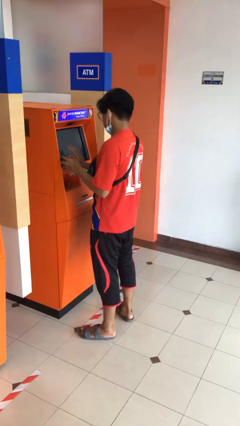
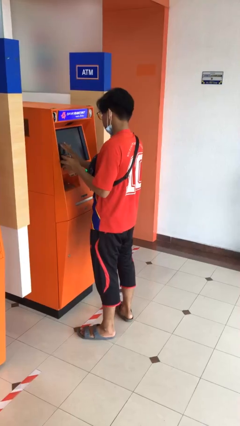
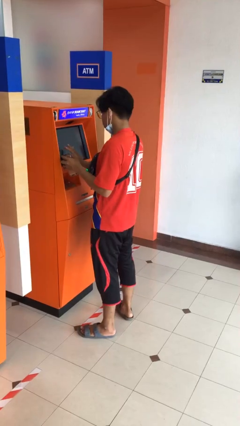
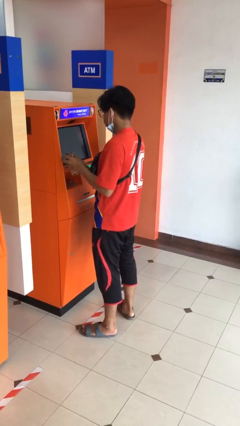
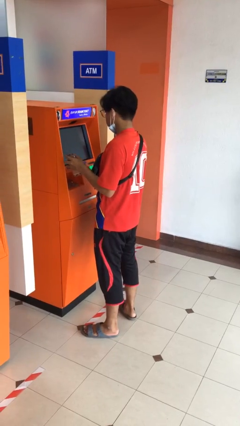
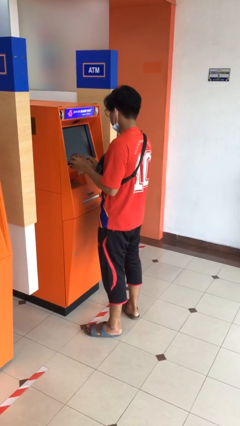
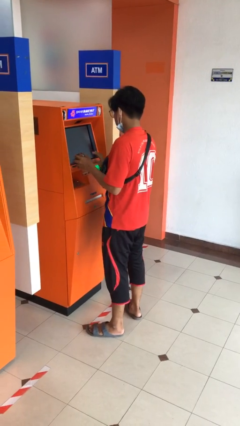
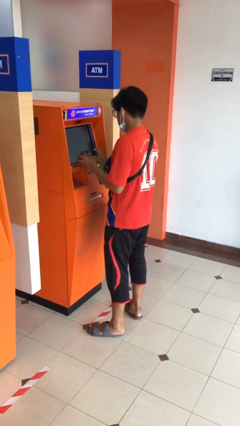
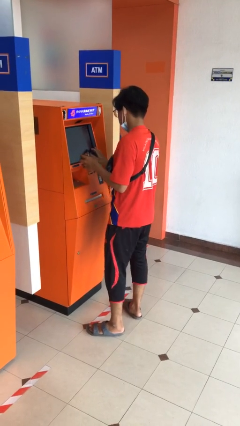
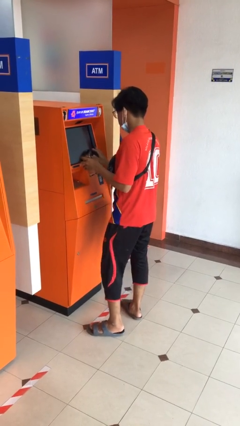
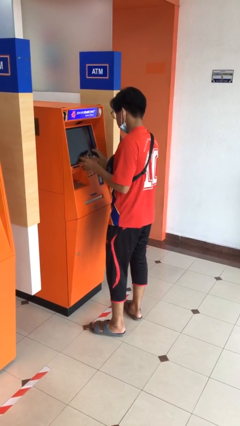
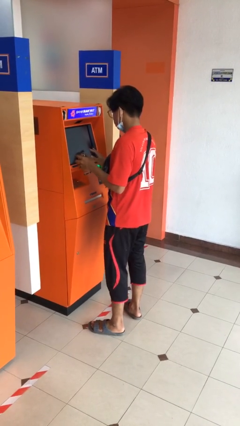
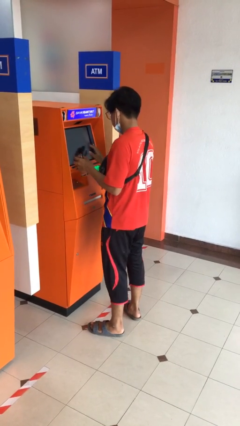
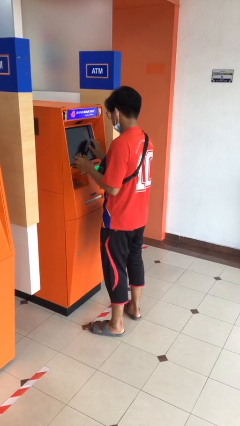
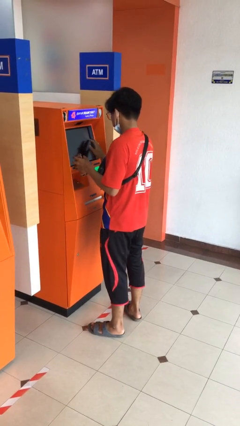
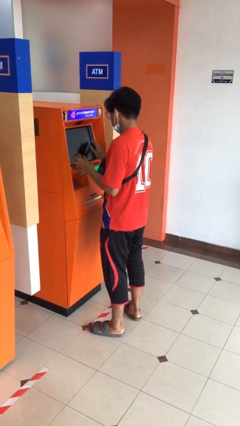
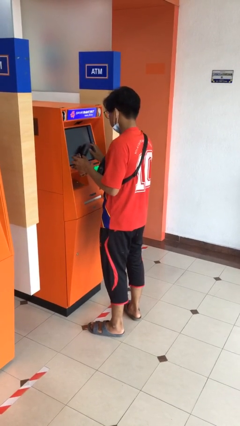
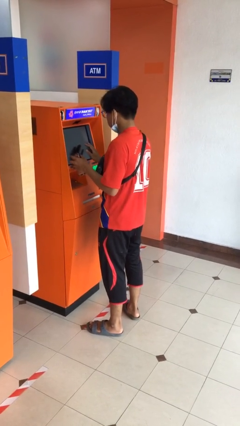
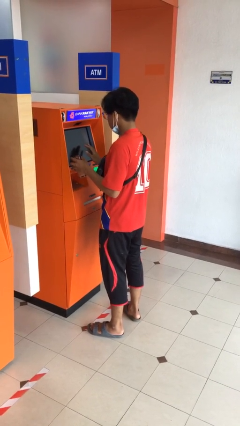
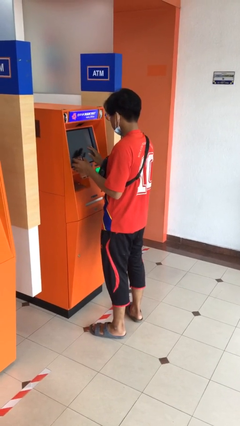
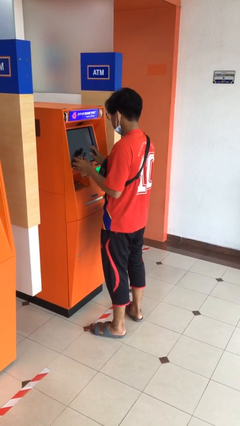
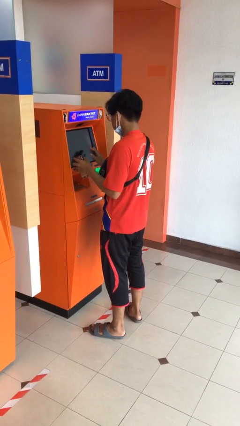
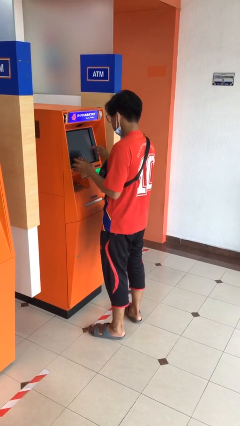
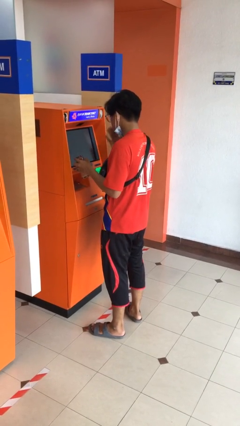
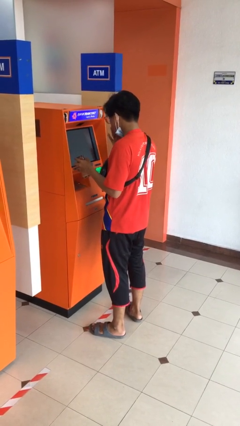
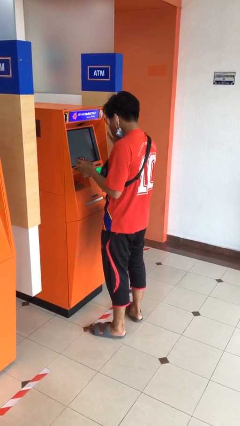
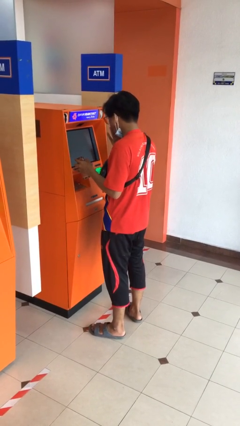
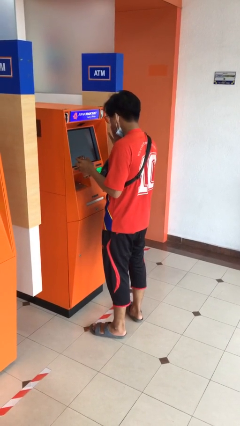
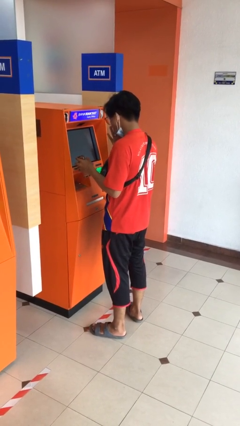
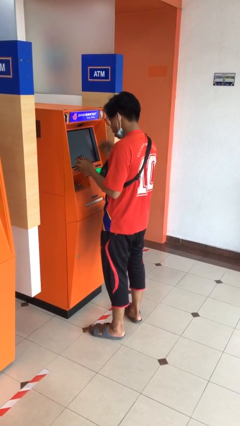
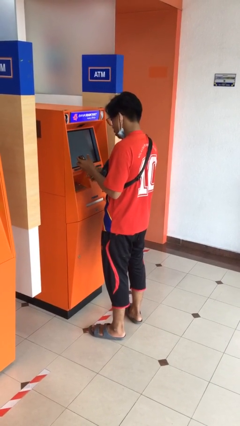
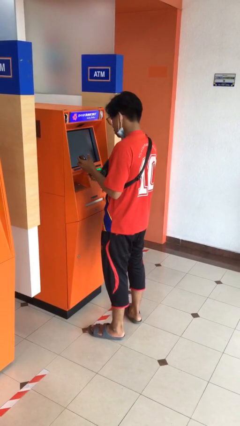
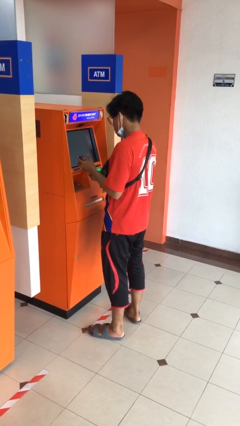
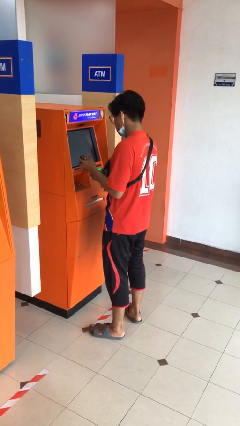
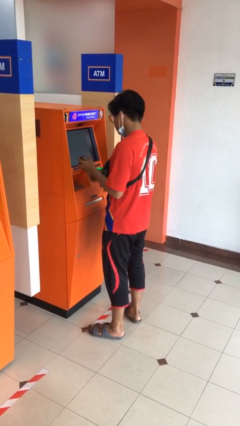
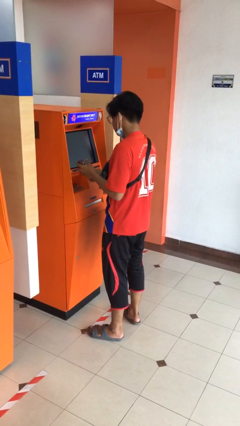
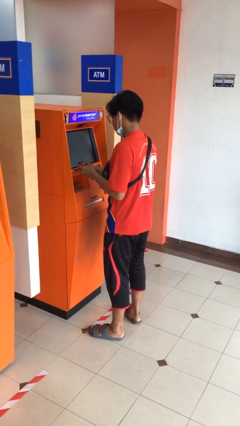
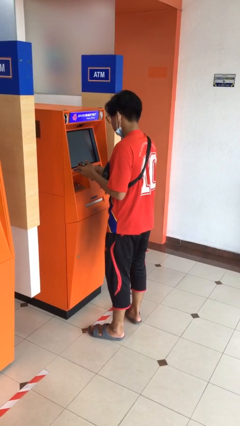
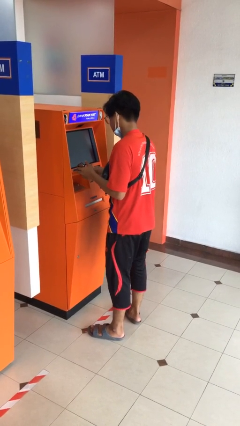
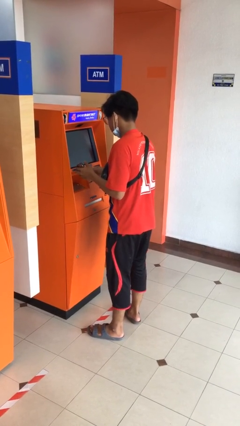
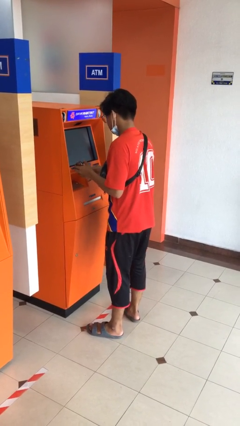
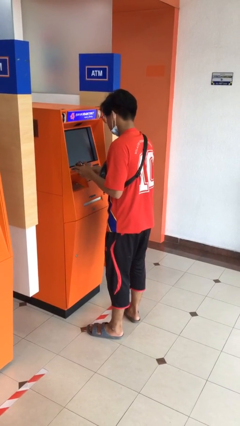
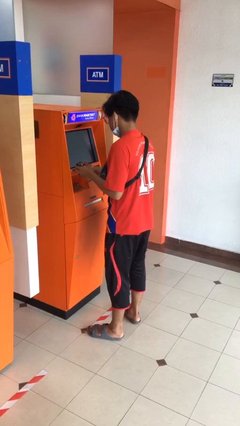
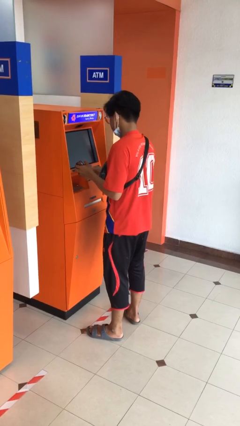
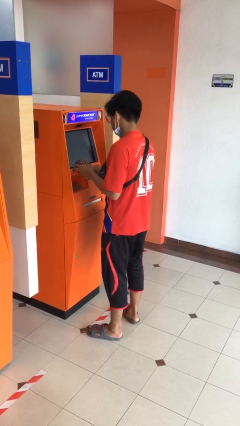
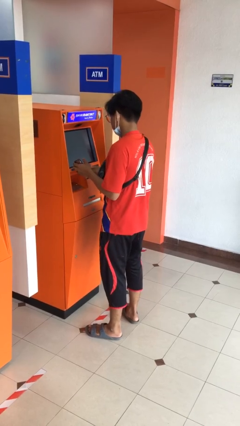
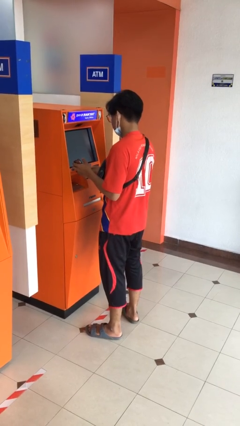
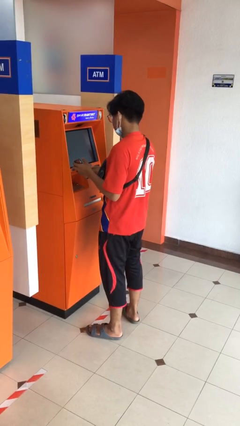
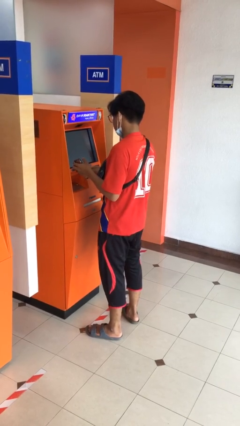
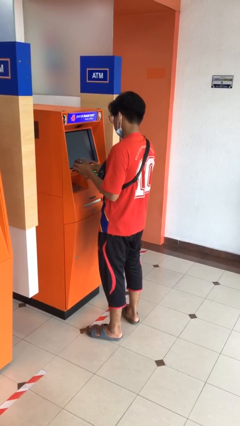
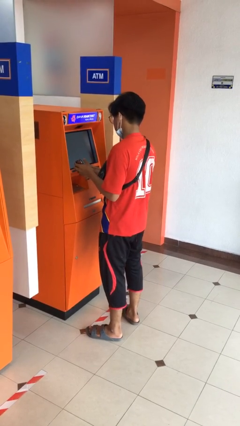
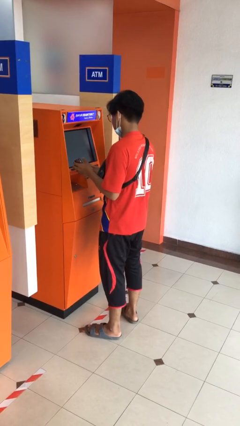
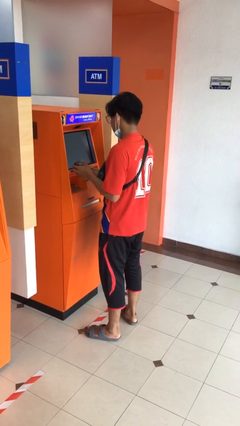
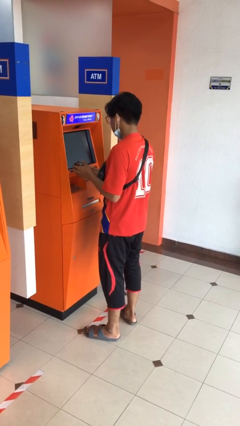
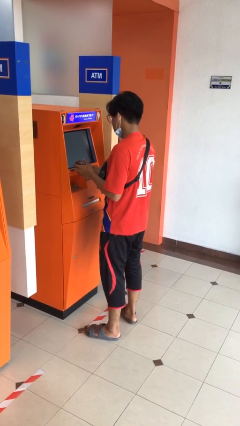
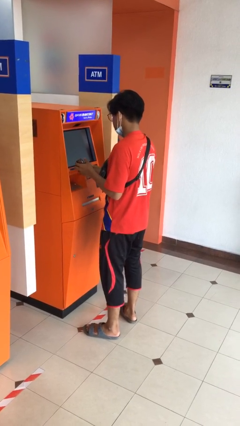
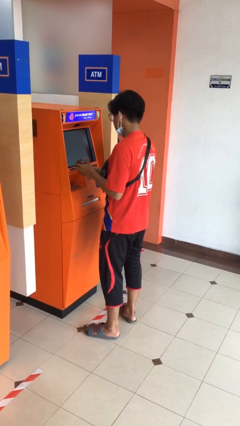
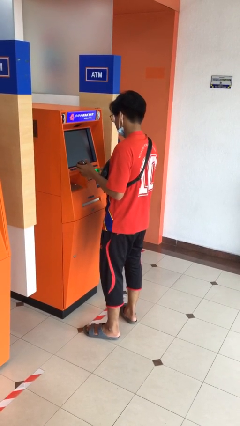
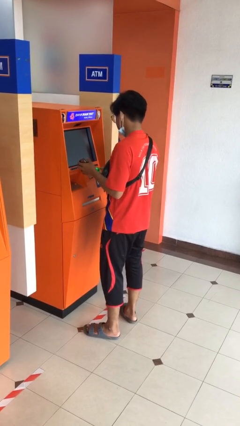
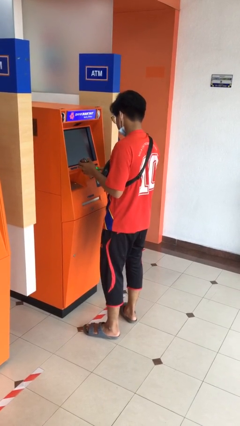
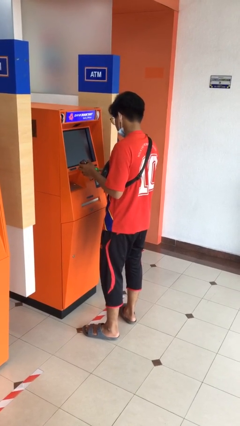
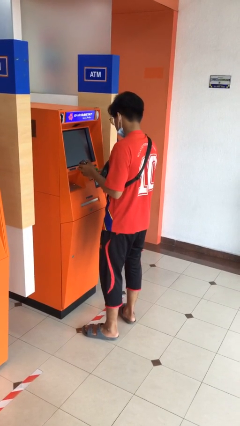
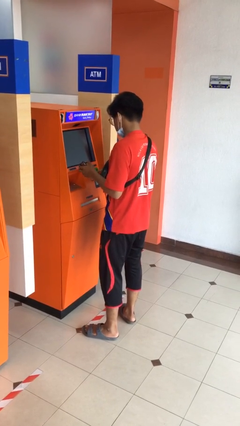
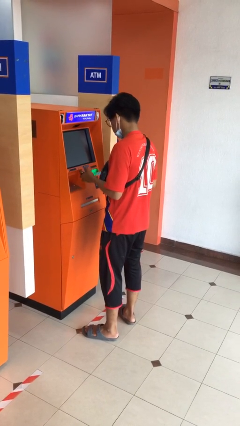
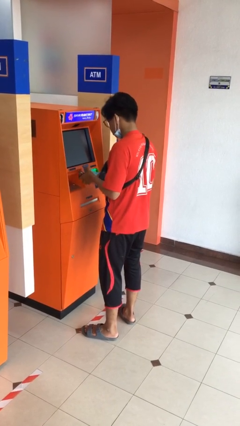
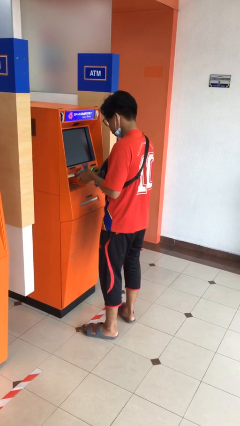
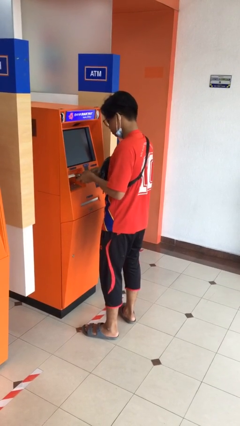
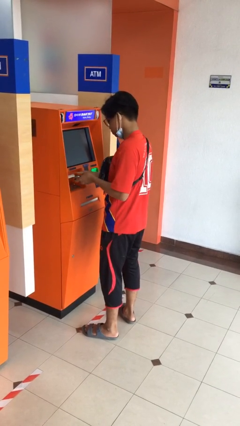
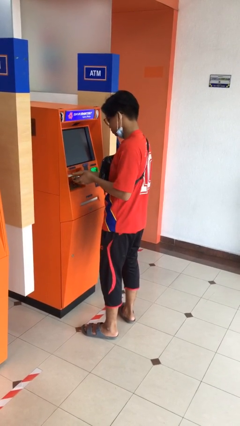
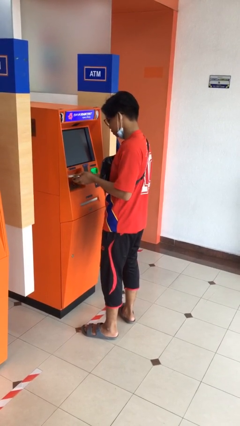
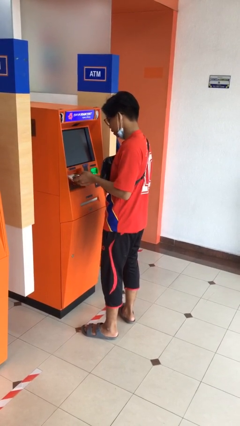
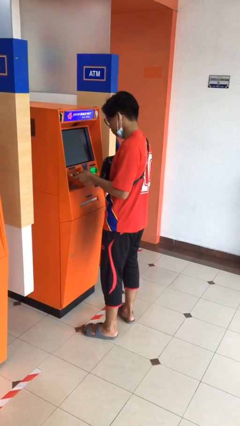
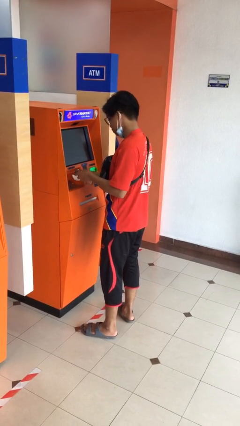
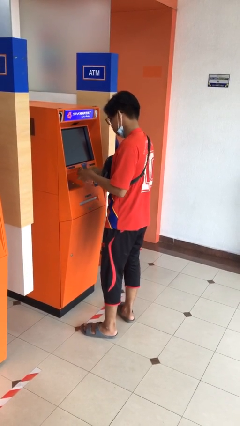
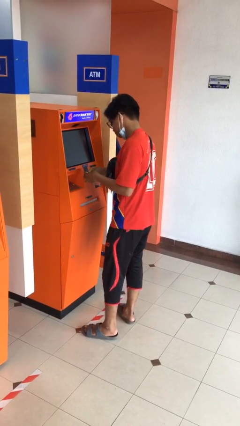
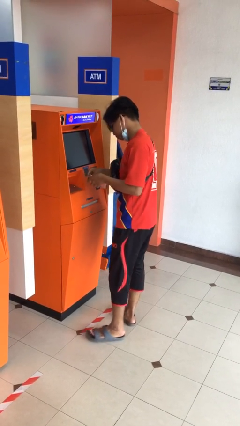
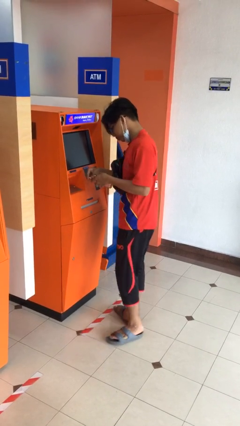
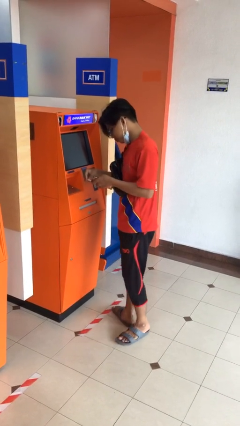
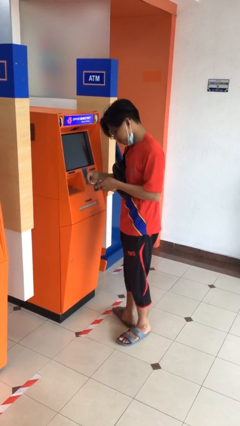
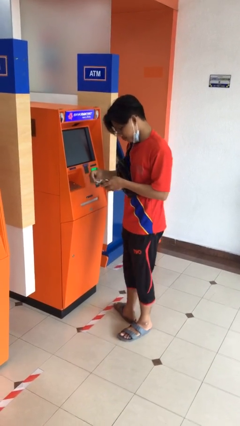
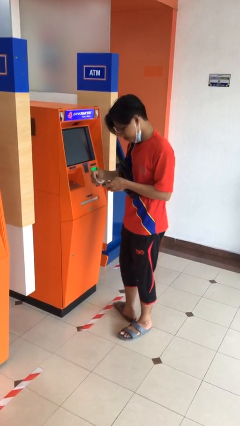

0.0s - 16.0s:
person purchases from machine

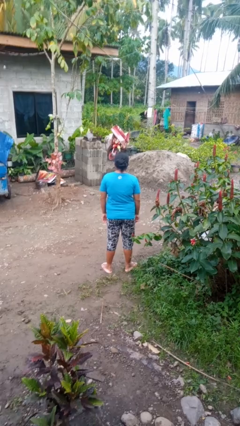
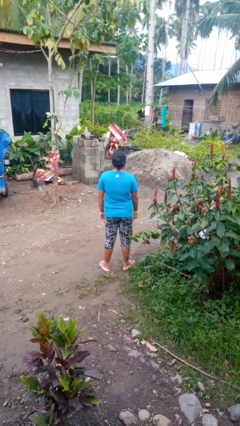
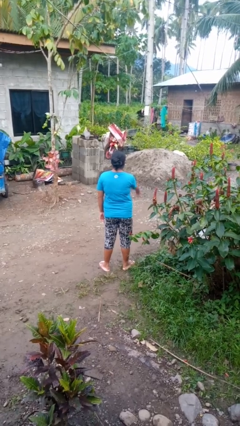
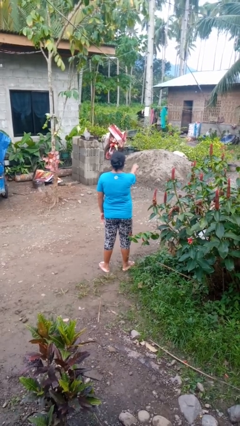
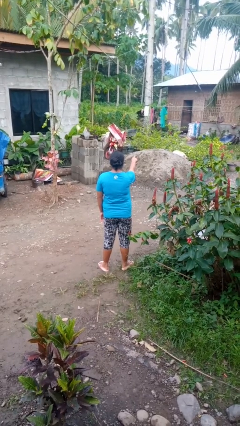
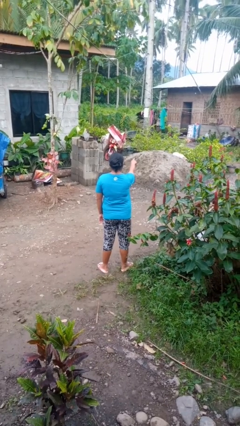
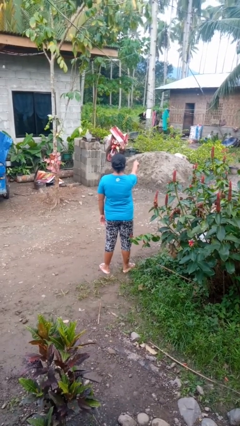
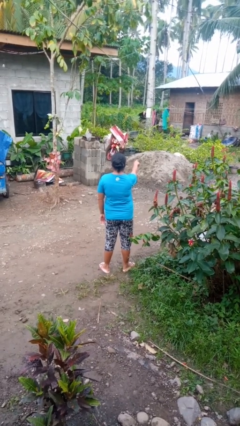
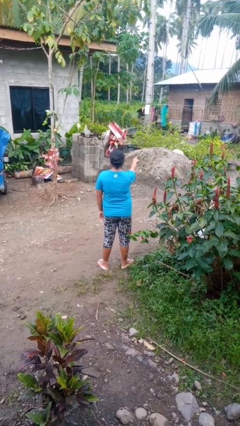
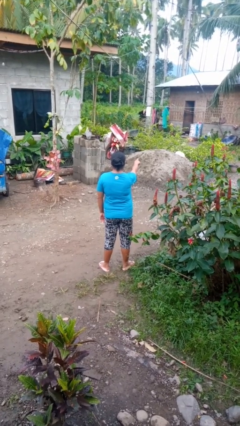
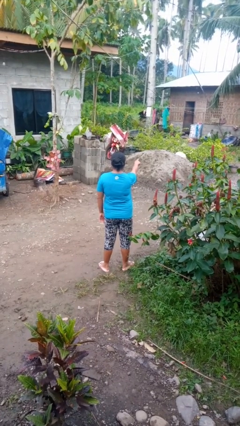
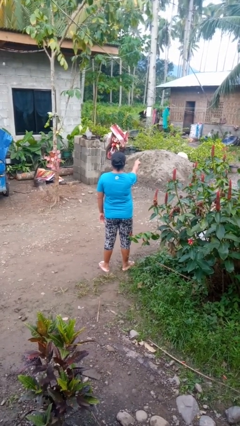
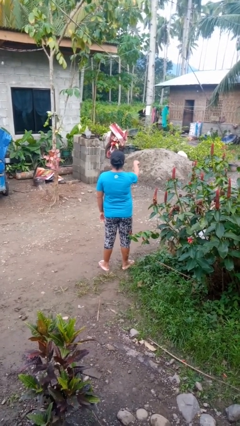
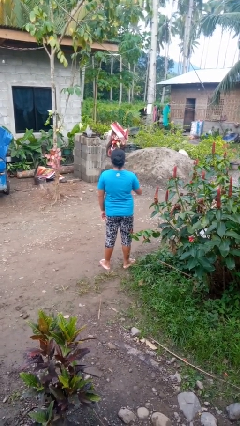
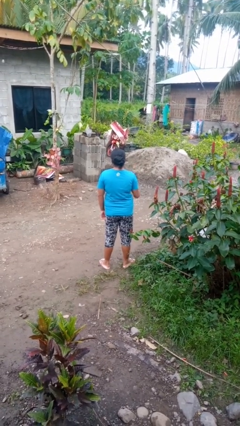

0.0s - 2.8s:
person points at person
